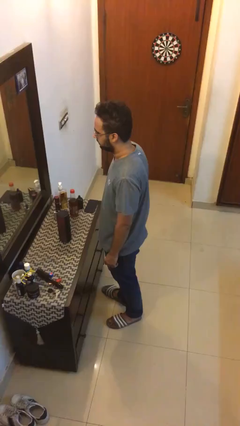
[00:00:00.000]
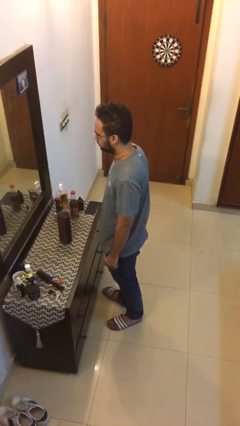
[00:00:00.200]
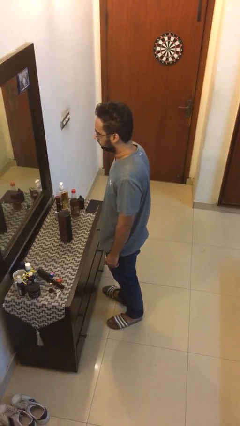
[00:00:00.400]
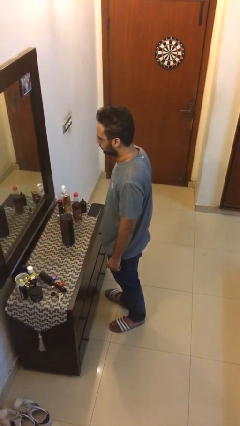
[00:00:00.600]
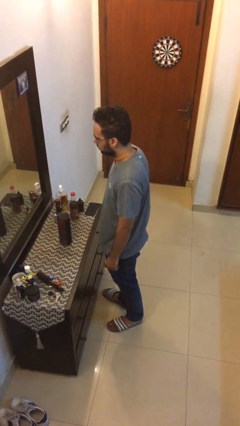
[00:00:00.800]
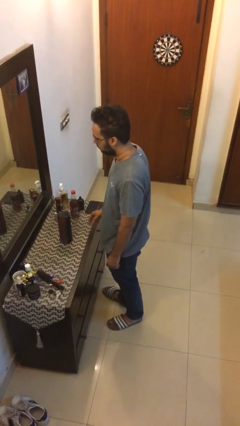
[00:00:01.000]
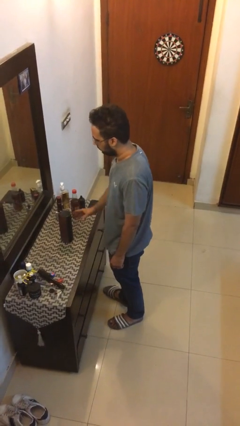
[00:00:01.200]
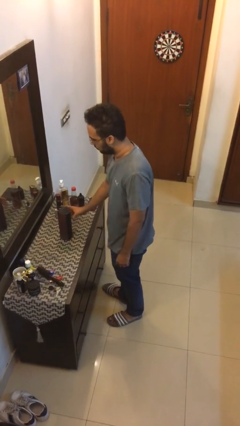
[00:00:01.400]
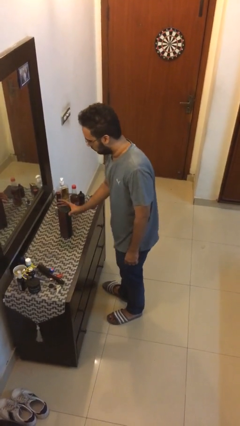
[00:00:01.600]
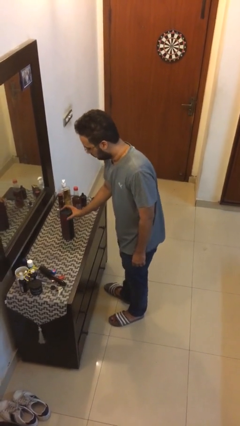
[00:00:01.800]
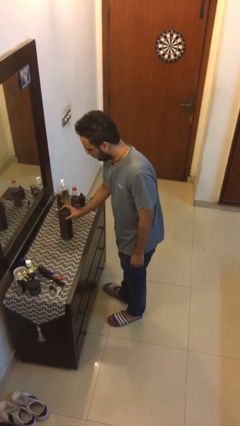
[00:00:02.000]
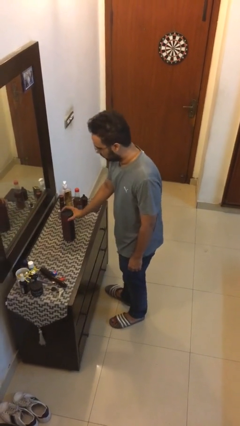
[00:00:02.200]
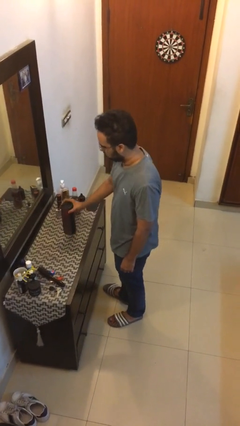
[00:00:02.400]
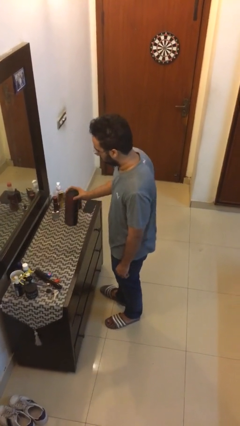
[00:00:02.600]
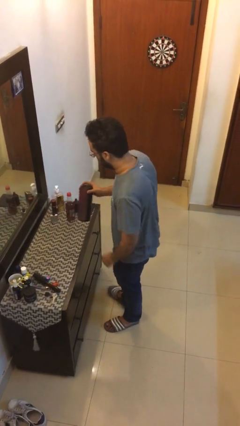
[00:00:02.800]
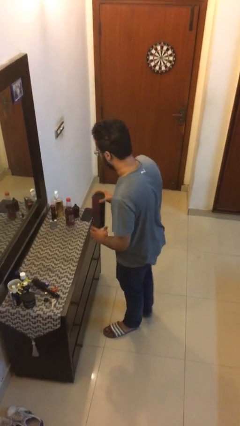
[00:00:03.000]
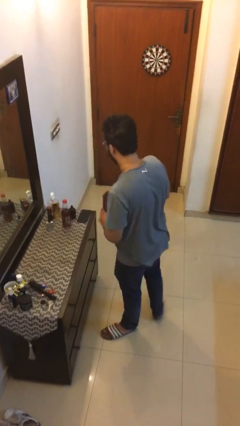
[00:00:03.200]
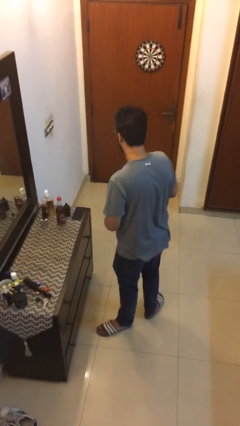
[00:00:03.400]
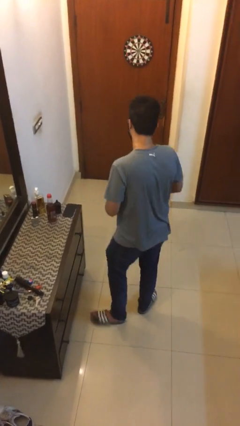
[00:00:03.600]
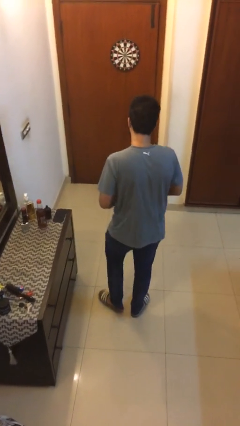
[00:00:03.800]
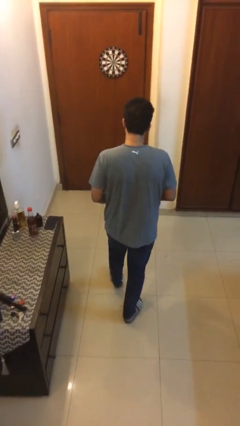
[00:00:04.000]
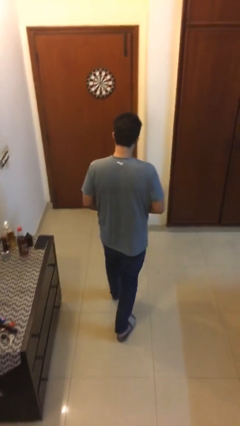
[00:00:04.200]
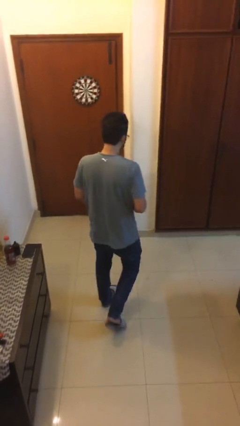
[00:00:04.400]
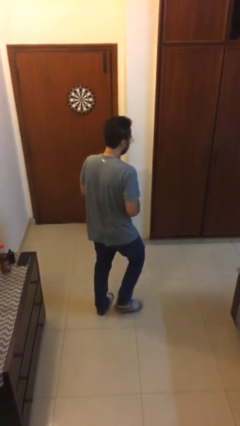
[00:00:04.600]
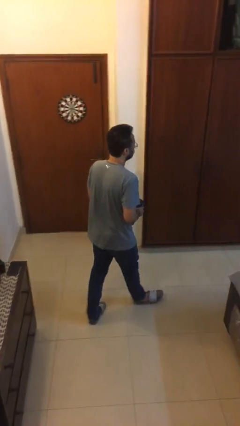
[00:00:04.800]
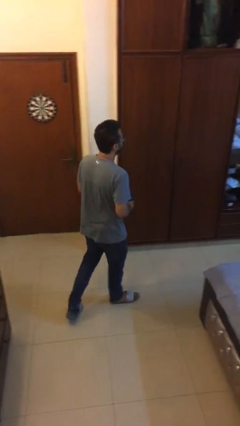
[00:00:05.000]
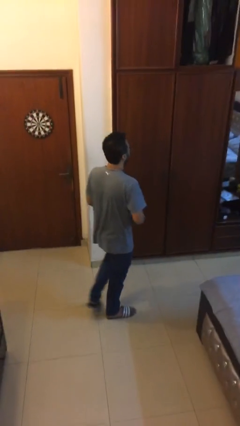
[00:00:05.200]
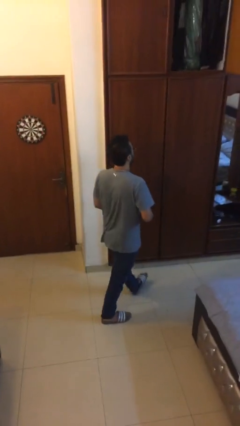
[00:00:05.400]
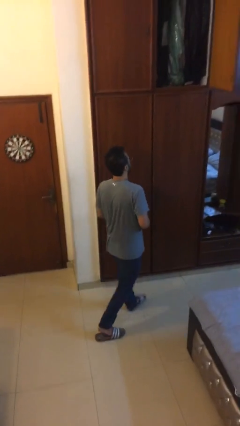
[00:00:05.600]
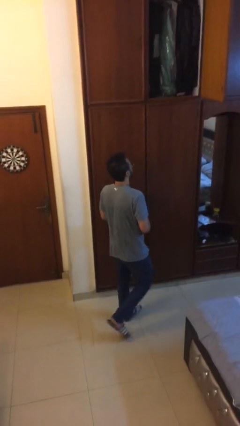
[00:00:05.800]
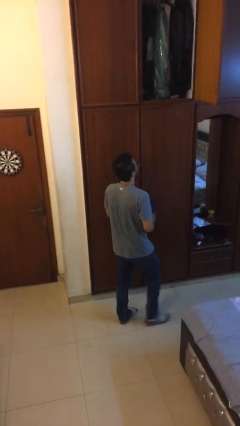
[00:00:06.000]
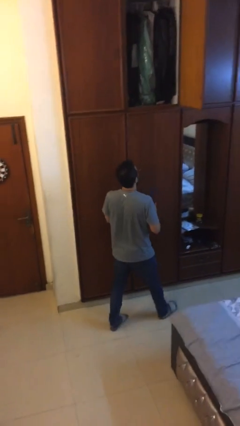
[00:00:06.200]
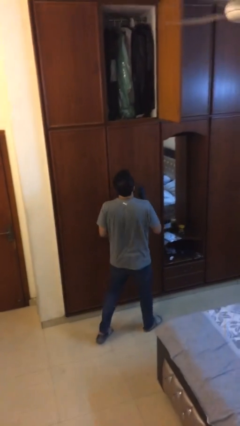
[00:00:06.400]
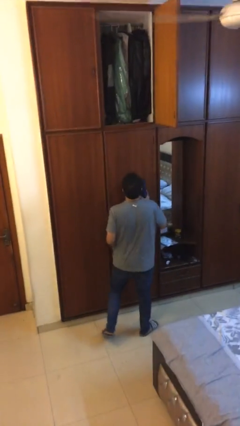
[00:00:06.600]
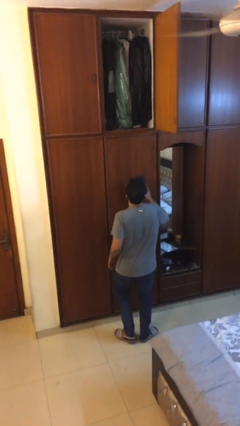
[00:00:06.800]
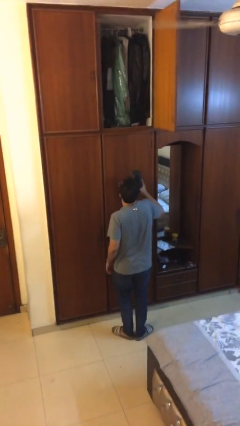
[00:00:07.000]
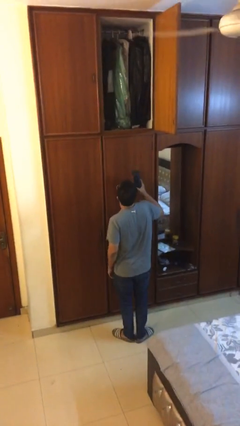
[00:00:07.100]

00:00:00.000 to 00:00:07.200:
person picks up object from table

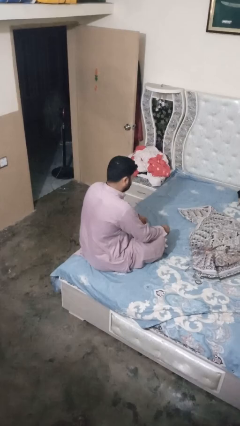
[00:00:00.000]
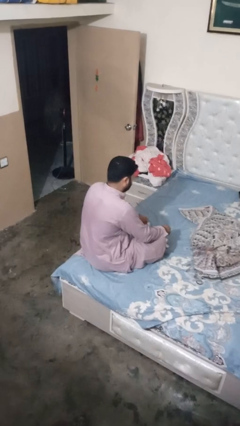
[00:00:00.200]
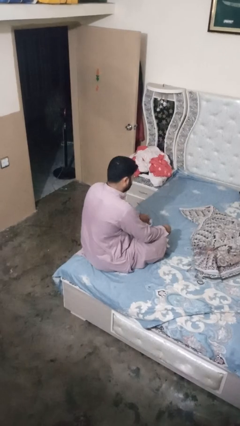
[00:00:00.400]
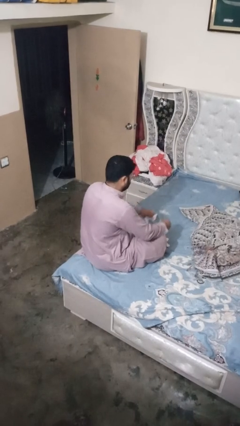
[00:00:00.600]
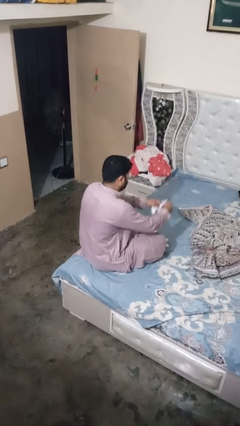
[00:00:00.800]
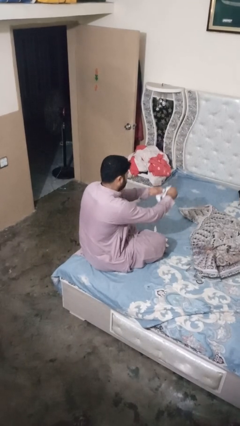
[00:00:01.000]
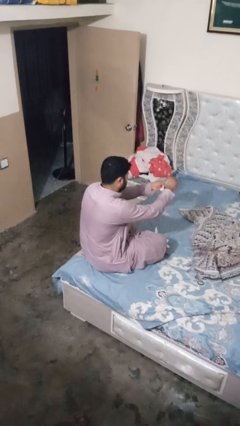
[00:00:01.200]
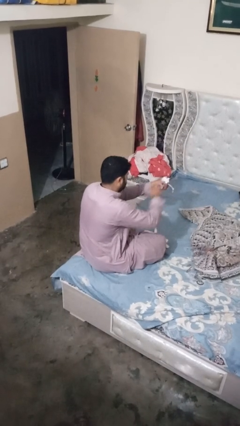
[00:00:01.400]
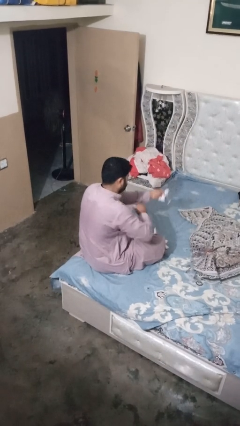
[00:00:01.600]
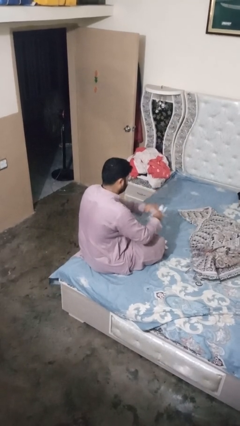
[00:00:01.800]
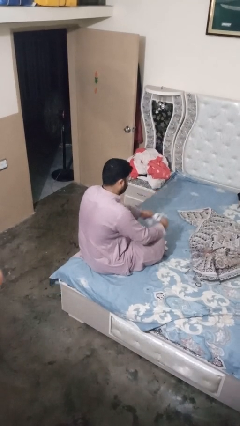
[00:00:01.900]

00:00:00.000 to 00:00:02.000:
person tears paper

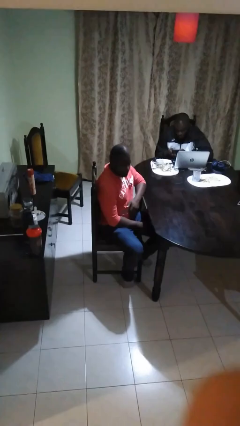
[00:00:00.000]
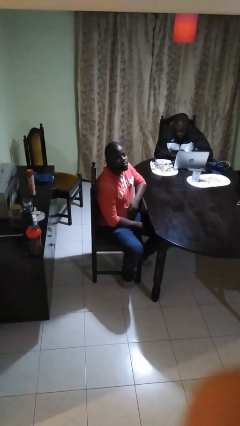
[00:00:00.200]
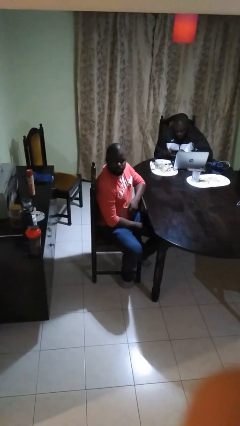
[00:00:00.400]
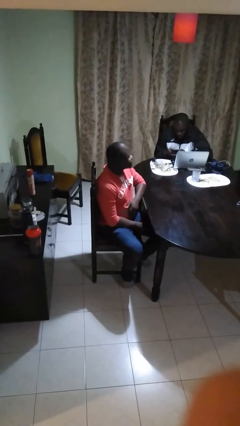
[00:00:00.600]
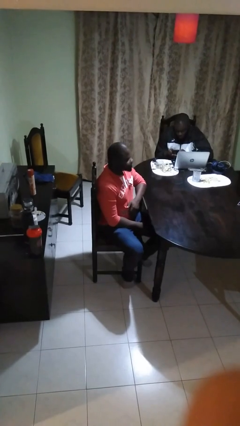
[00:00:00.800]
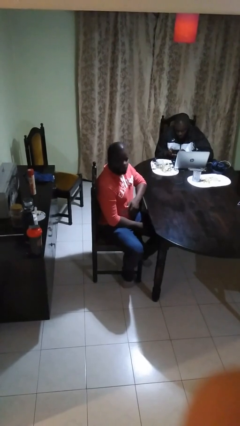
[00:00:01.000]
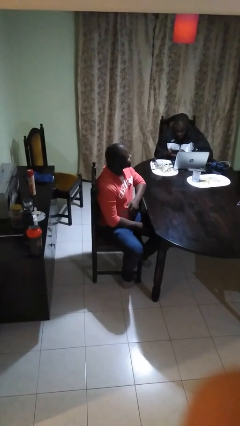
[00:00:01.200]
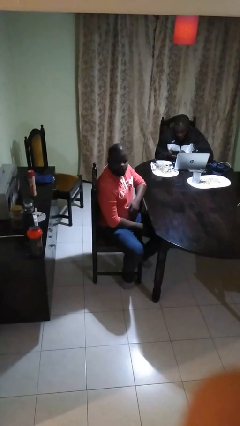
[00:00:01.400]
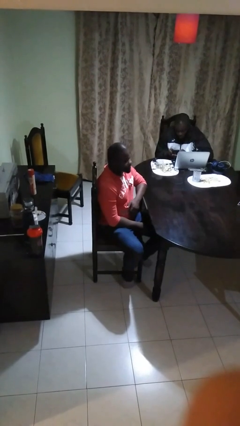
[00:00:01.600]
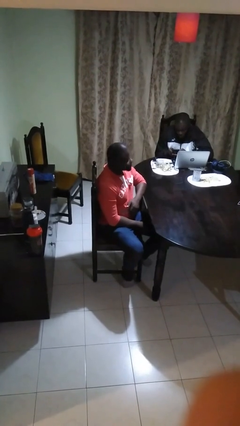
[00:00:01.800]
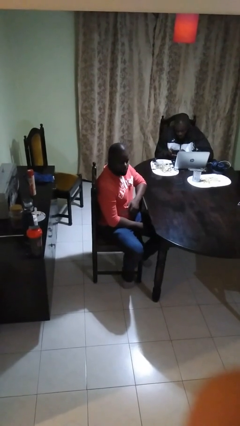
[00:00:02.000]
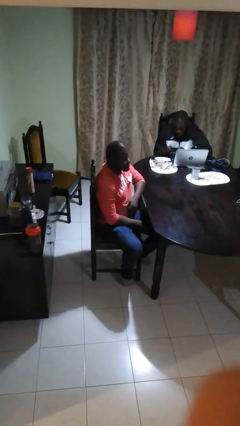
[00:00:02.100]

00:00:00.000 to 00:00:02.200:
person shakes head

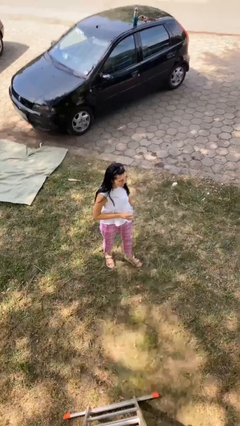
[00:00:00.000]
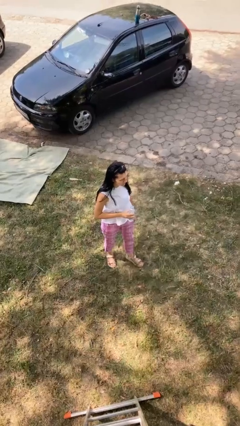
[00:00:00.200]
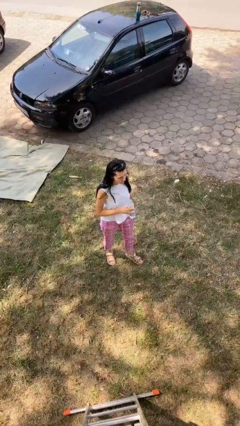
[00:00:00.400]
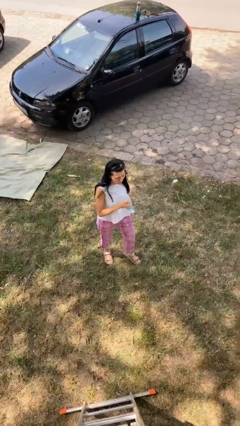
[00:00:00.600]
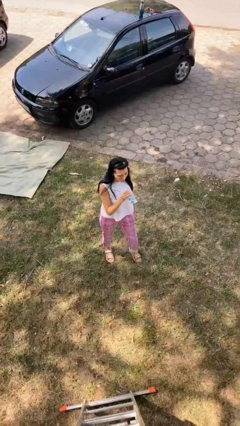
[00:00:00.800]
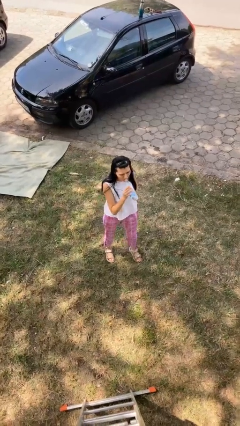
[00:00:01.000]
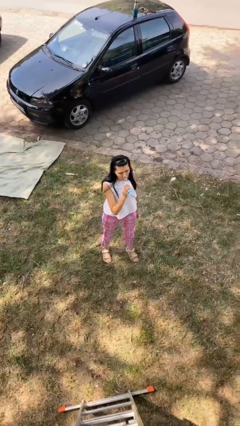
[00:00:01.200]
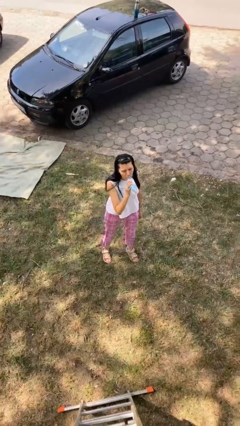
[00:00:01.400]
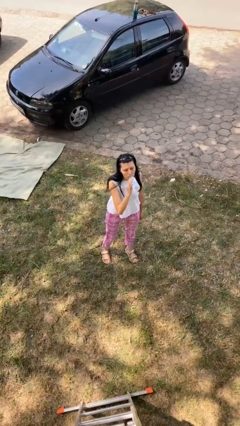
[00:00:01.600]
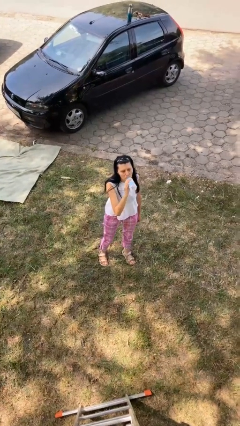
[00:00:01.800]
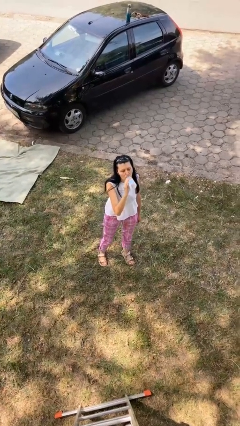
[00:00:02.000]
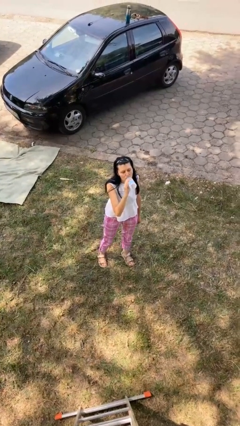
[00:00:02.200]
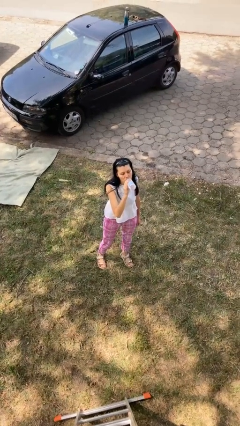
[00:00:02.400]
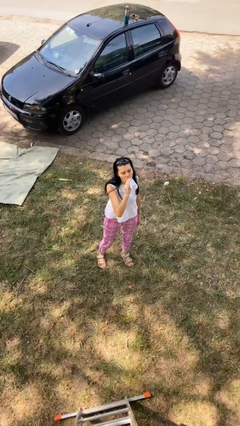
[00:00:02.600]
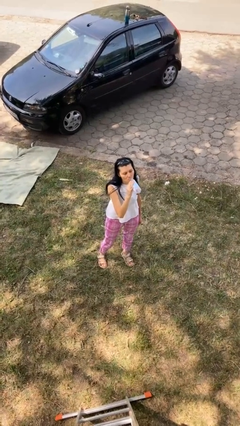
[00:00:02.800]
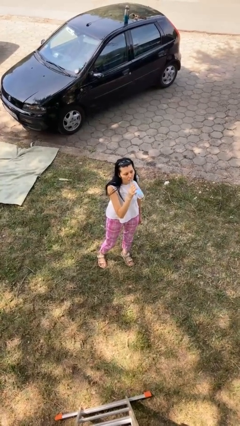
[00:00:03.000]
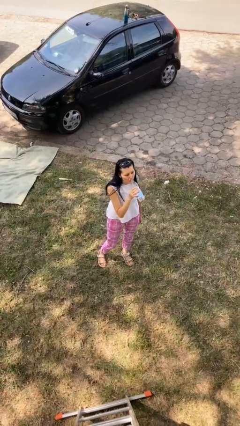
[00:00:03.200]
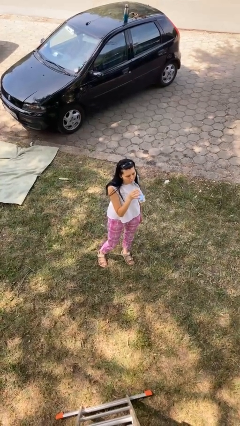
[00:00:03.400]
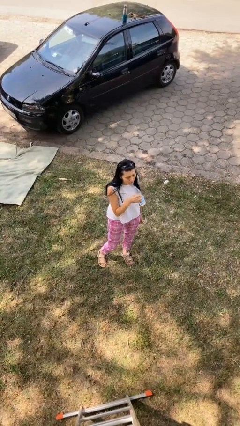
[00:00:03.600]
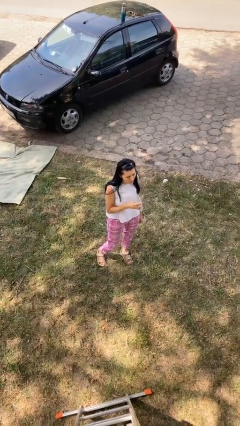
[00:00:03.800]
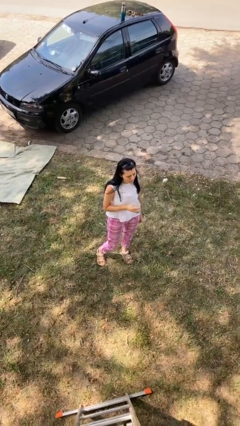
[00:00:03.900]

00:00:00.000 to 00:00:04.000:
person drinks from bottle

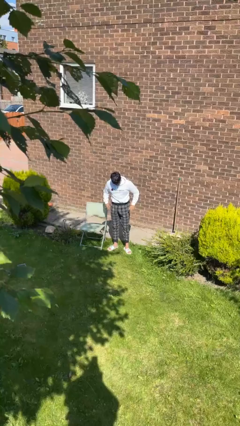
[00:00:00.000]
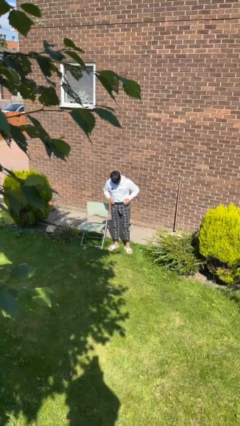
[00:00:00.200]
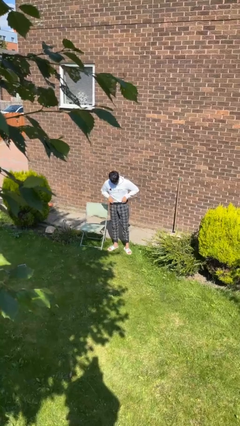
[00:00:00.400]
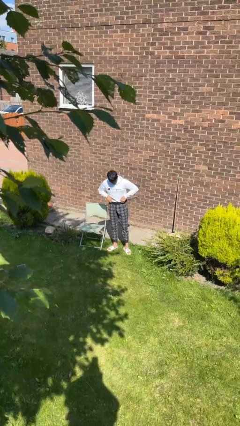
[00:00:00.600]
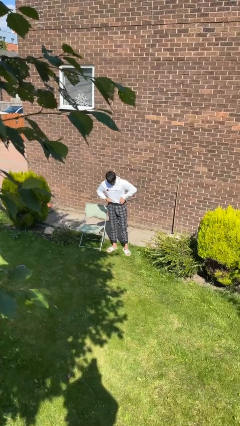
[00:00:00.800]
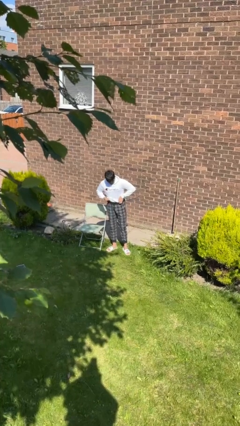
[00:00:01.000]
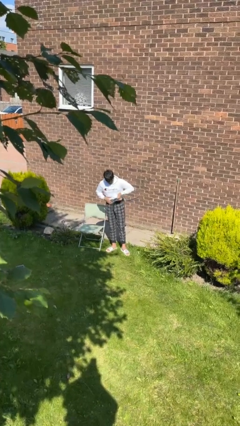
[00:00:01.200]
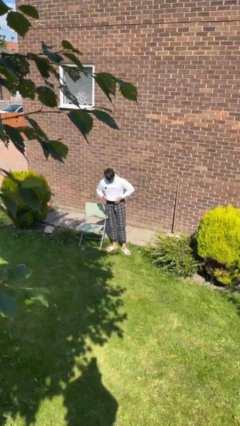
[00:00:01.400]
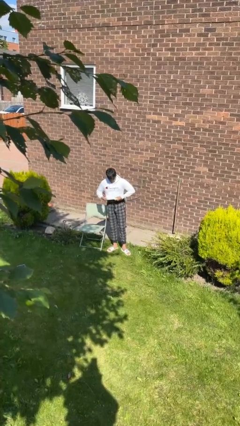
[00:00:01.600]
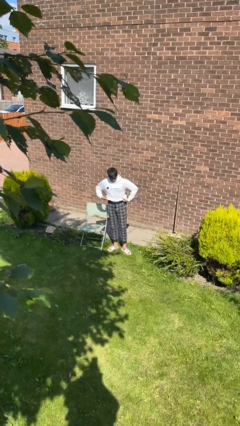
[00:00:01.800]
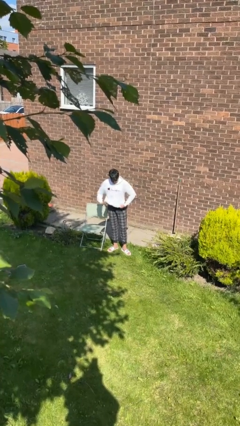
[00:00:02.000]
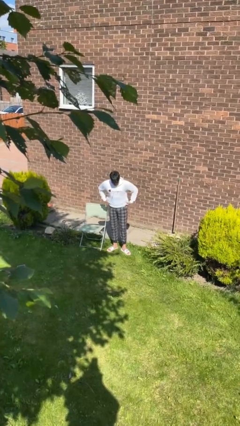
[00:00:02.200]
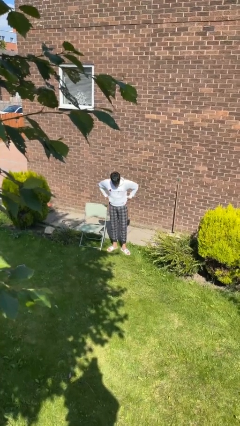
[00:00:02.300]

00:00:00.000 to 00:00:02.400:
person untucks shirt
